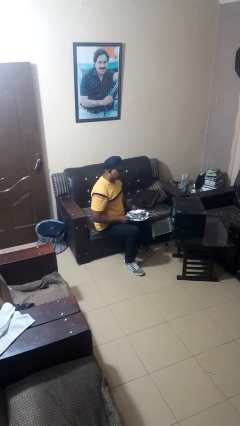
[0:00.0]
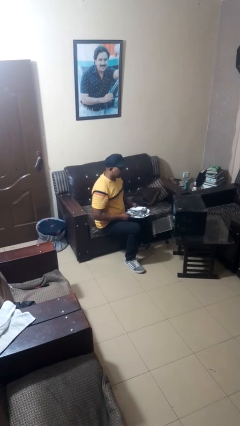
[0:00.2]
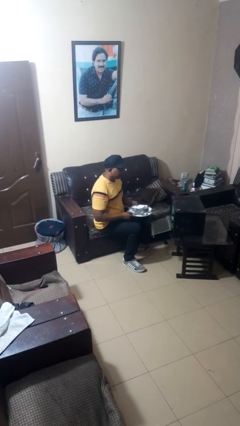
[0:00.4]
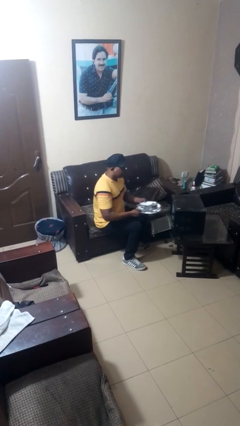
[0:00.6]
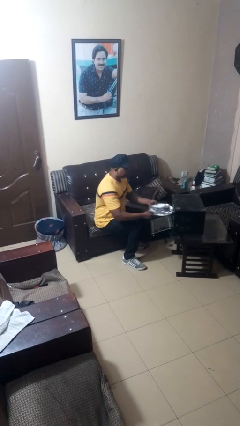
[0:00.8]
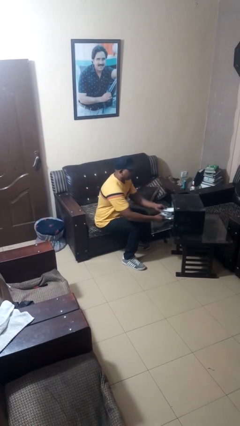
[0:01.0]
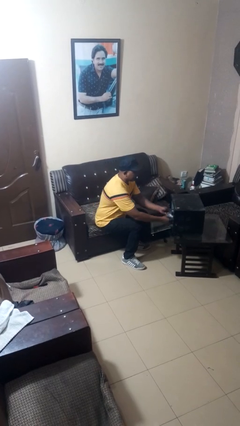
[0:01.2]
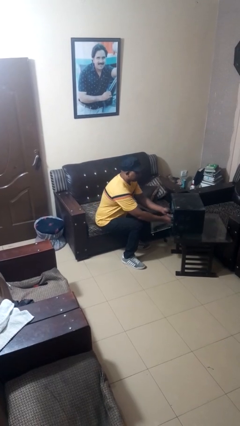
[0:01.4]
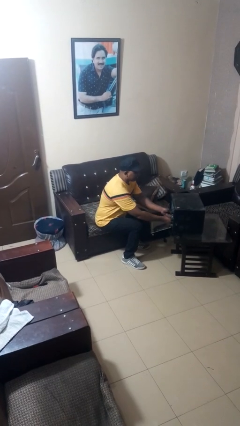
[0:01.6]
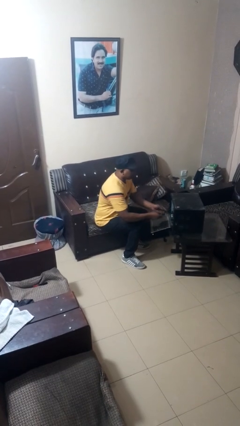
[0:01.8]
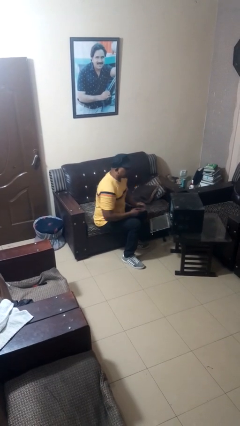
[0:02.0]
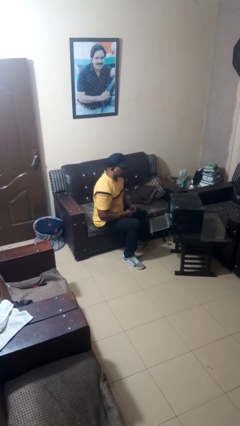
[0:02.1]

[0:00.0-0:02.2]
person loads dishwasher

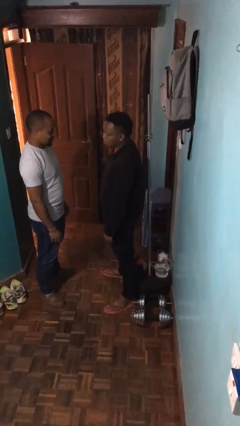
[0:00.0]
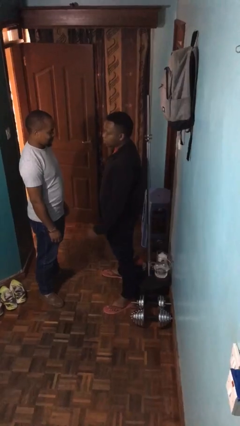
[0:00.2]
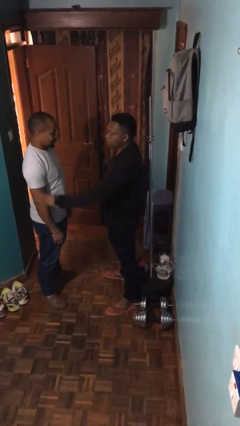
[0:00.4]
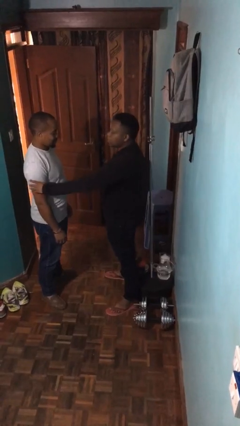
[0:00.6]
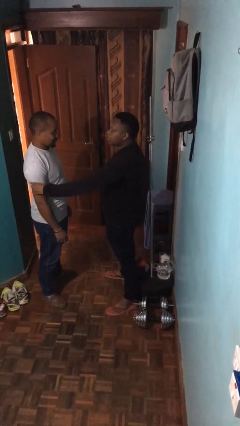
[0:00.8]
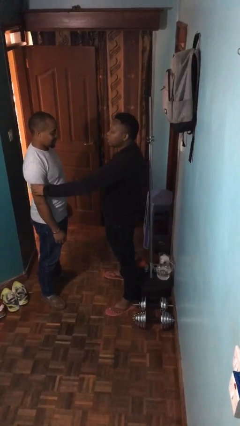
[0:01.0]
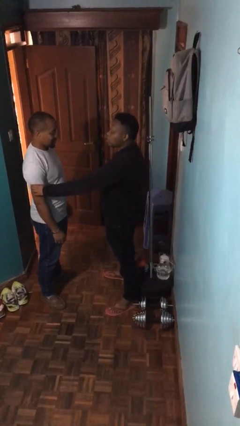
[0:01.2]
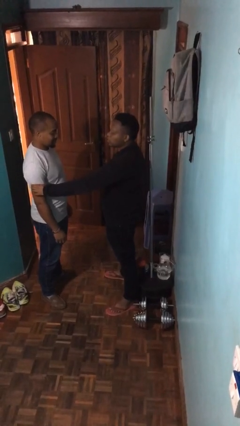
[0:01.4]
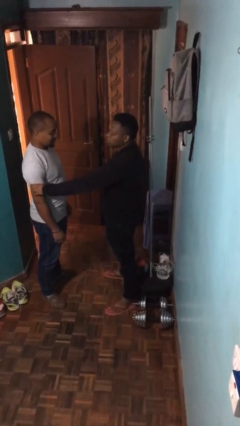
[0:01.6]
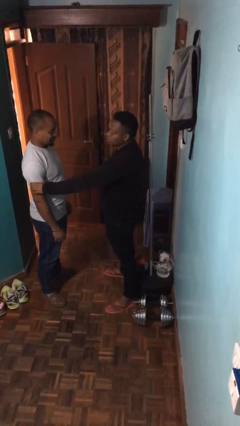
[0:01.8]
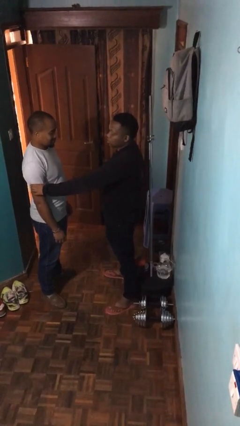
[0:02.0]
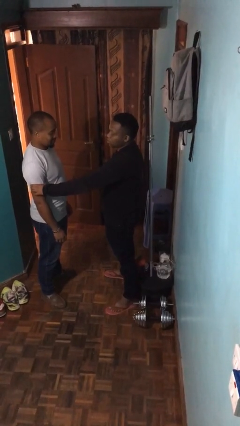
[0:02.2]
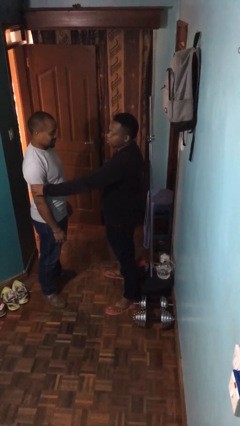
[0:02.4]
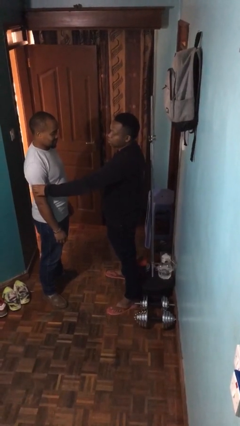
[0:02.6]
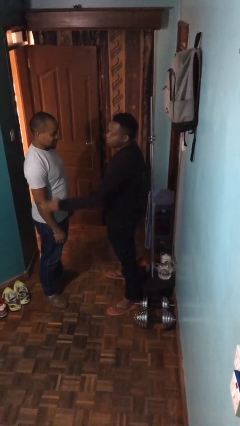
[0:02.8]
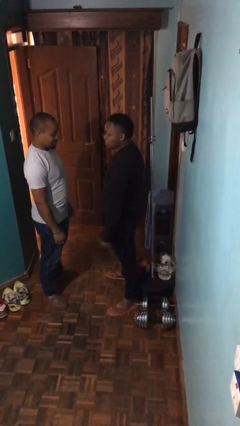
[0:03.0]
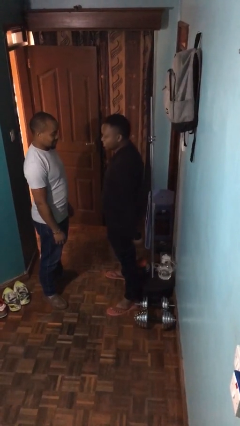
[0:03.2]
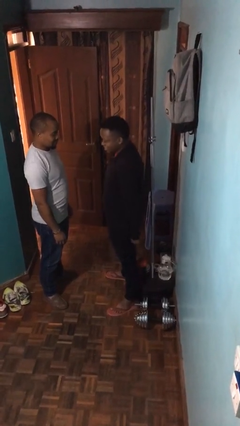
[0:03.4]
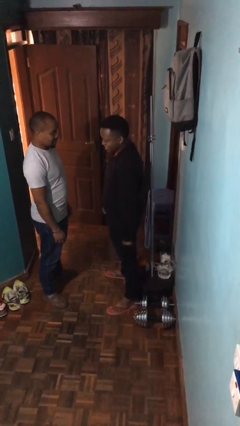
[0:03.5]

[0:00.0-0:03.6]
person grabs person by bicep

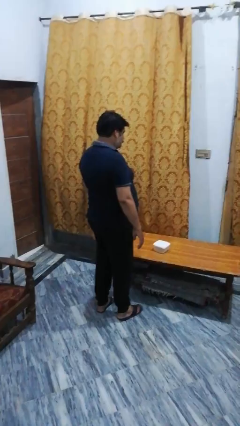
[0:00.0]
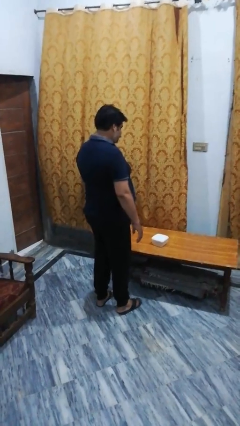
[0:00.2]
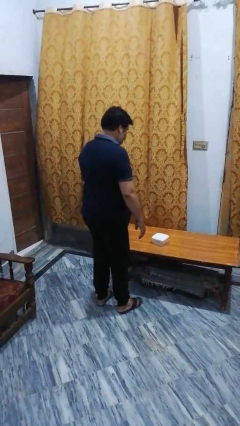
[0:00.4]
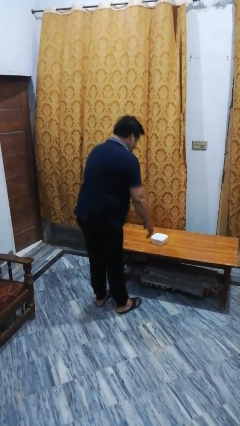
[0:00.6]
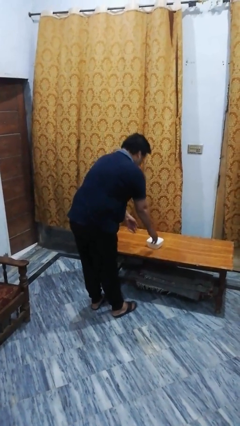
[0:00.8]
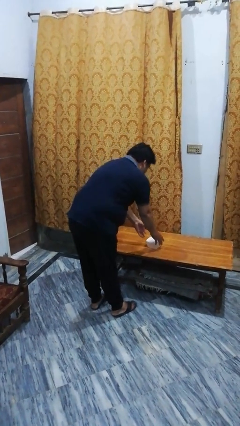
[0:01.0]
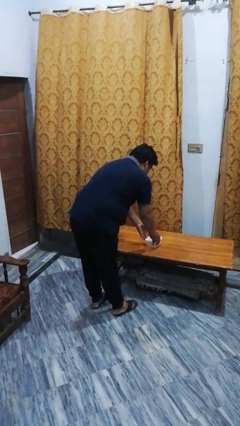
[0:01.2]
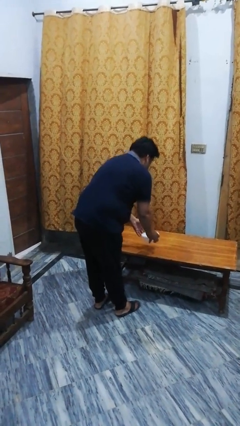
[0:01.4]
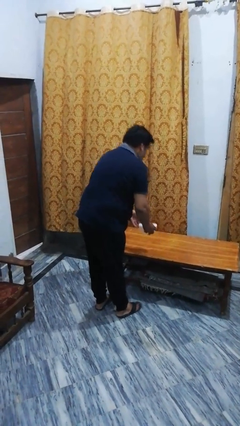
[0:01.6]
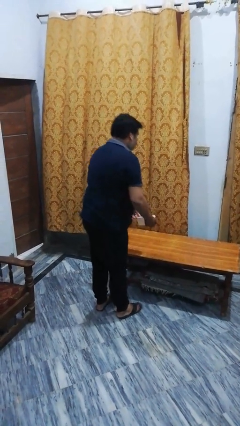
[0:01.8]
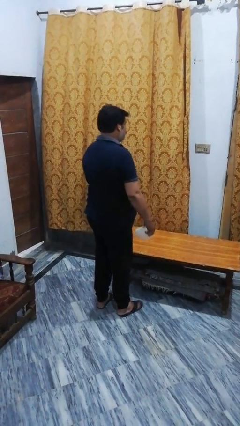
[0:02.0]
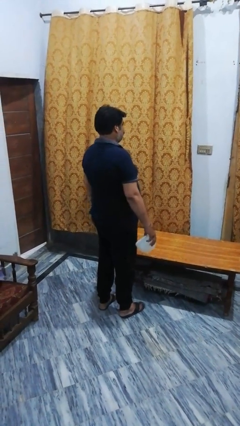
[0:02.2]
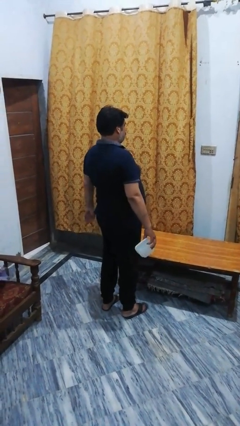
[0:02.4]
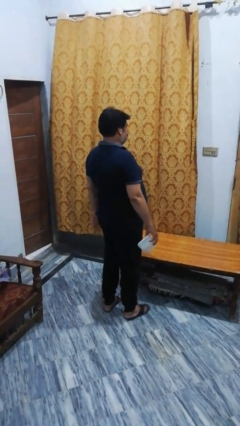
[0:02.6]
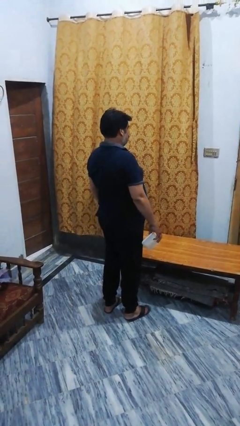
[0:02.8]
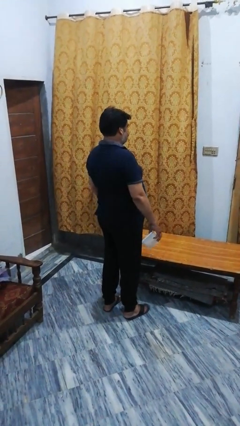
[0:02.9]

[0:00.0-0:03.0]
person picks up object from table

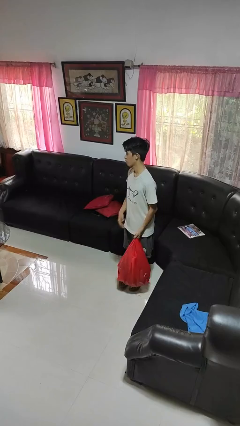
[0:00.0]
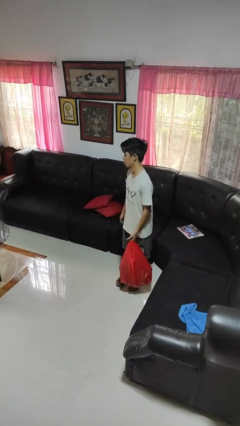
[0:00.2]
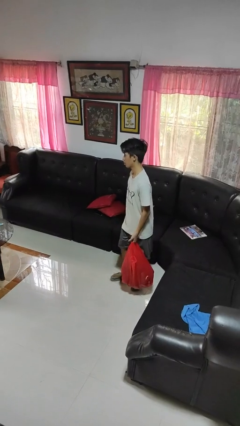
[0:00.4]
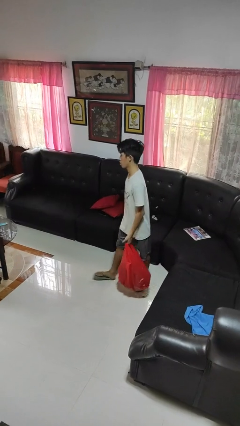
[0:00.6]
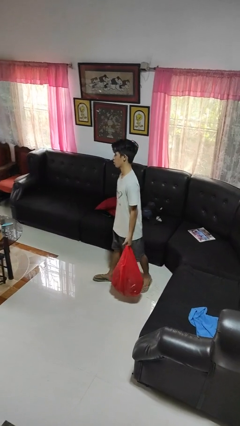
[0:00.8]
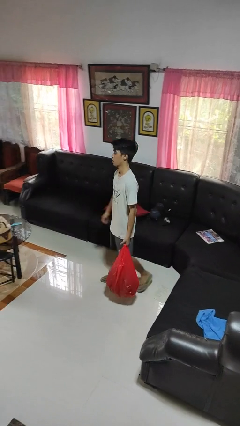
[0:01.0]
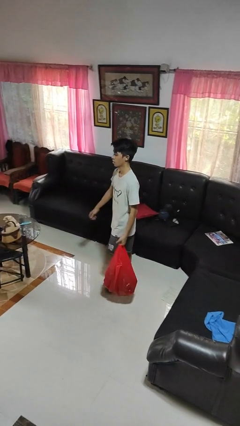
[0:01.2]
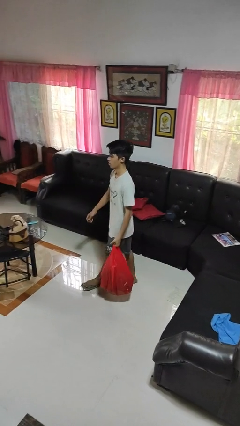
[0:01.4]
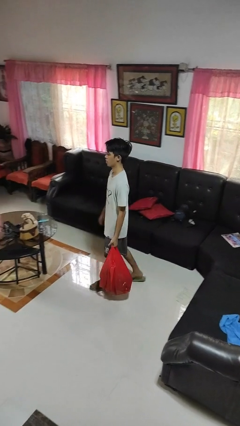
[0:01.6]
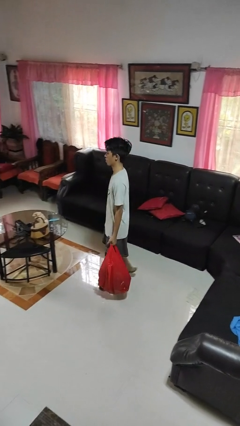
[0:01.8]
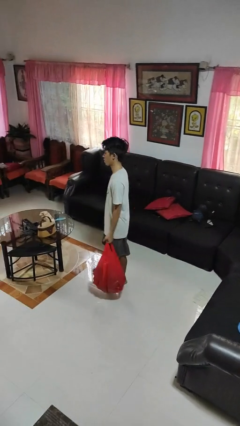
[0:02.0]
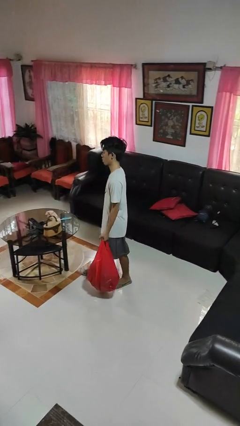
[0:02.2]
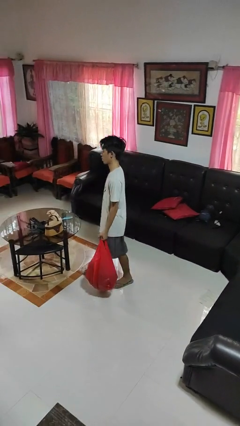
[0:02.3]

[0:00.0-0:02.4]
person carries groceries

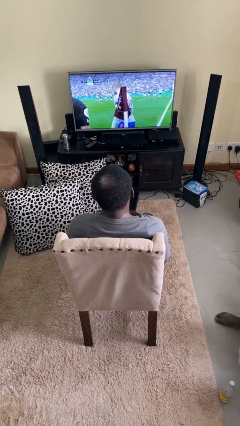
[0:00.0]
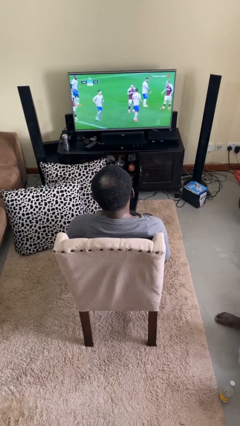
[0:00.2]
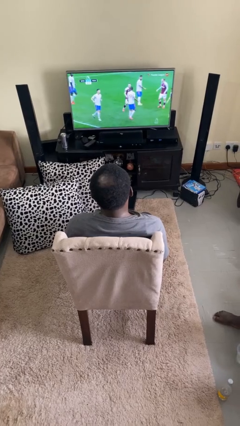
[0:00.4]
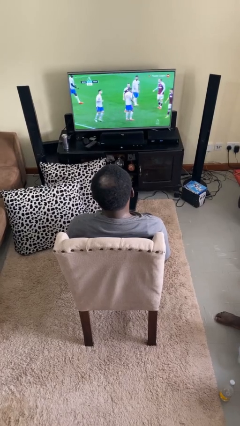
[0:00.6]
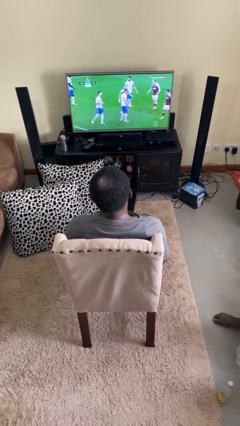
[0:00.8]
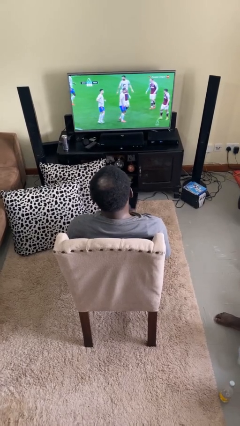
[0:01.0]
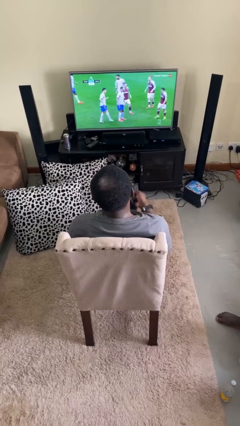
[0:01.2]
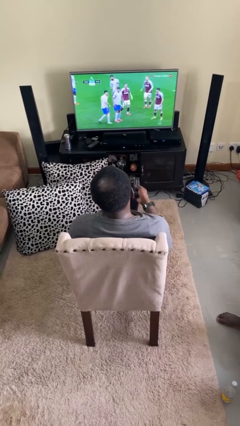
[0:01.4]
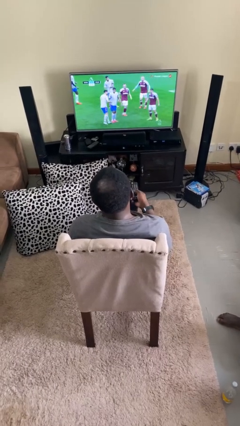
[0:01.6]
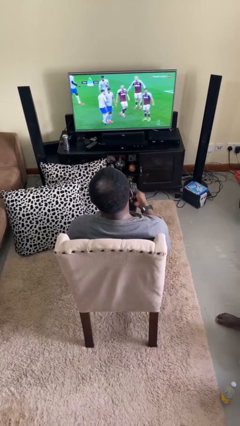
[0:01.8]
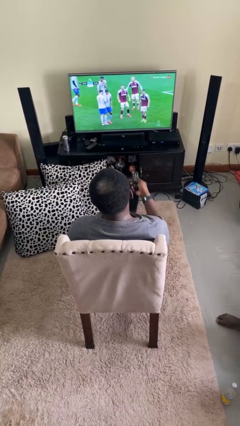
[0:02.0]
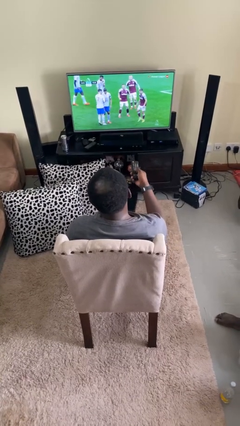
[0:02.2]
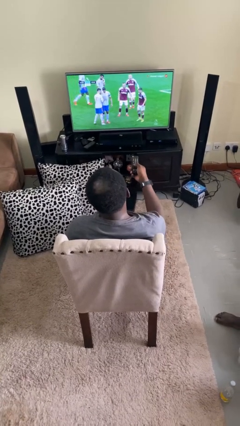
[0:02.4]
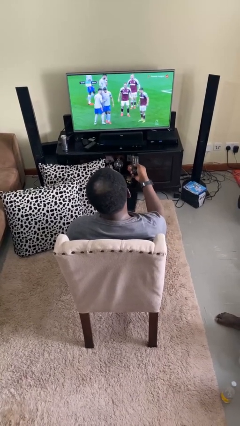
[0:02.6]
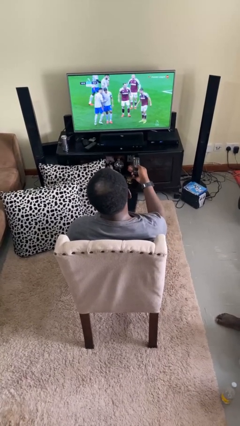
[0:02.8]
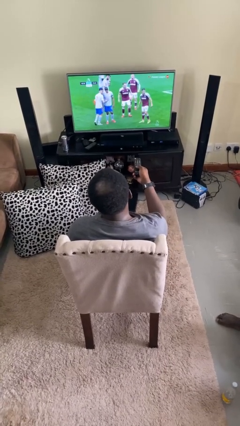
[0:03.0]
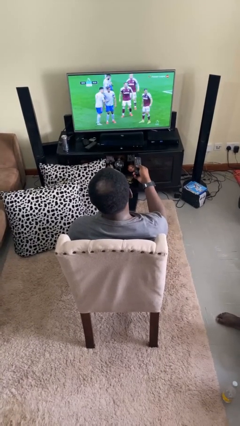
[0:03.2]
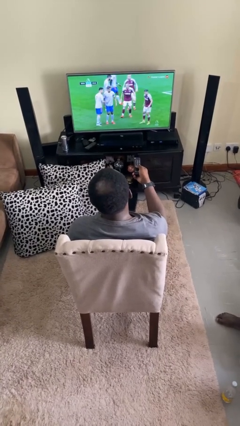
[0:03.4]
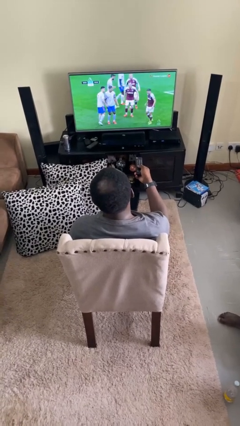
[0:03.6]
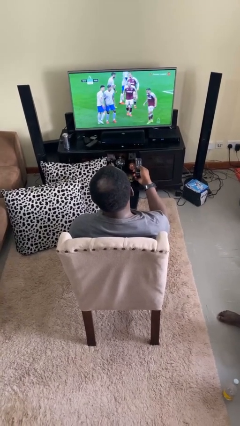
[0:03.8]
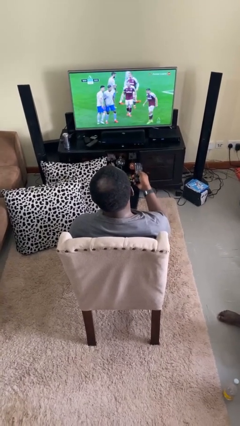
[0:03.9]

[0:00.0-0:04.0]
person uses television remote

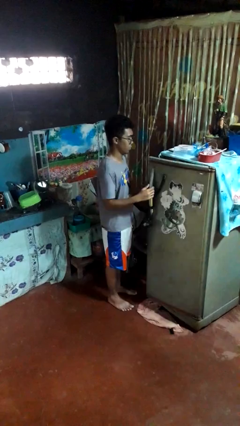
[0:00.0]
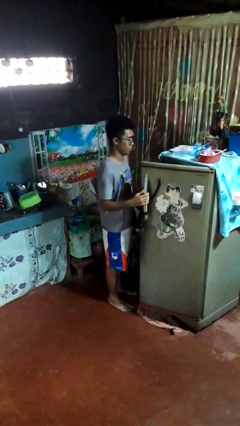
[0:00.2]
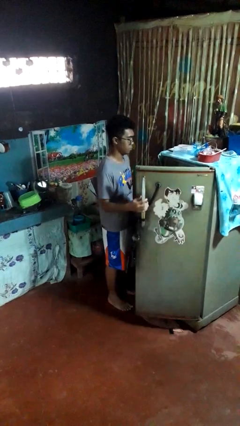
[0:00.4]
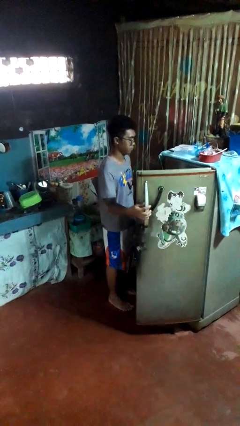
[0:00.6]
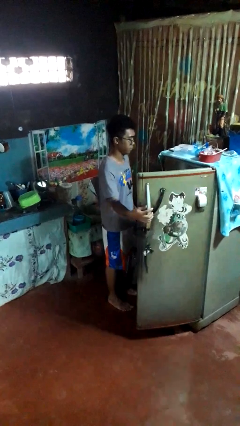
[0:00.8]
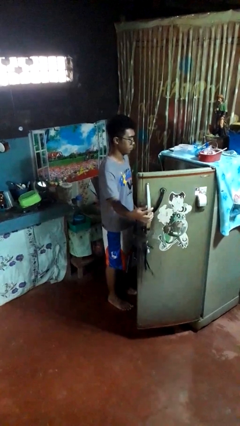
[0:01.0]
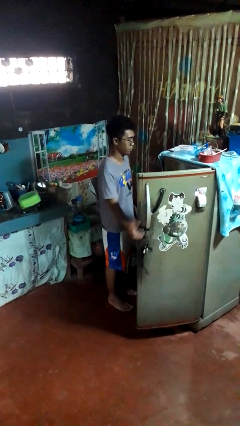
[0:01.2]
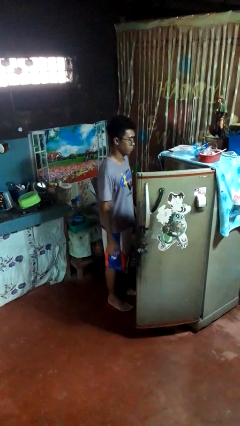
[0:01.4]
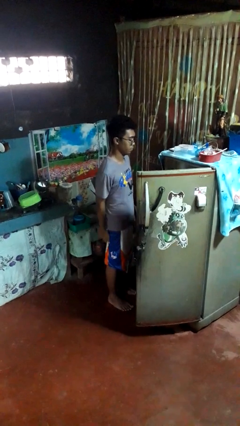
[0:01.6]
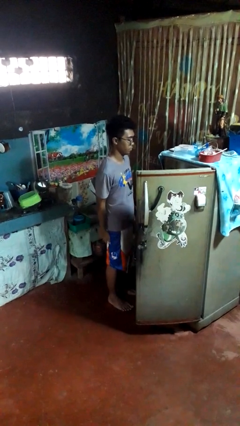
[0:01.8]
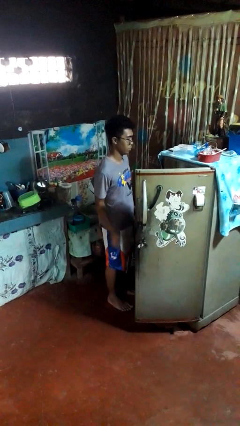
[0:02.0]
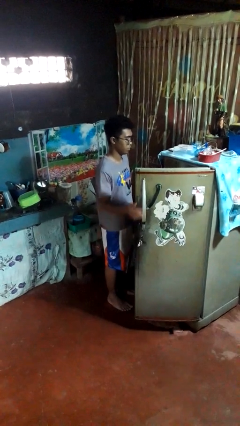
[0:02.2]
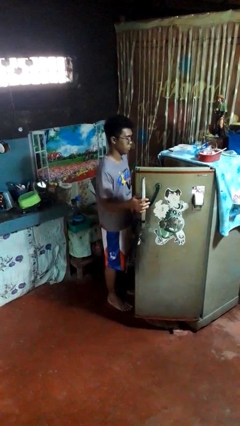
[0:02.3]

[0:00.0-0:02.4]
person opens refrigerator
